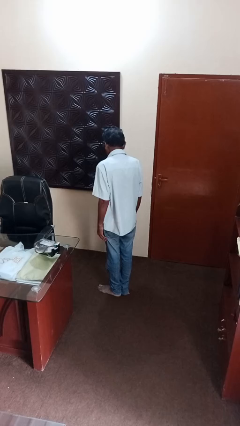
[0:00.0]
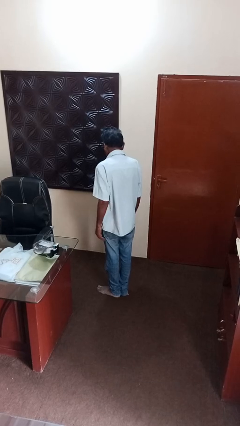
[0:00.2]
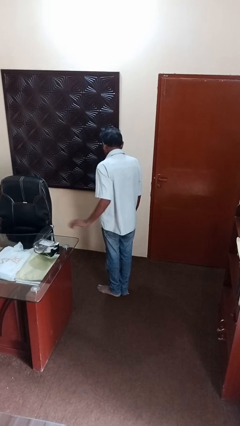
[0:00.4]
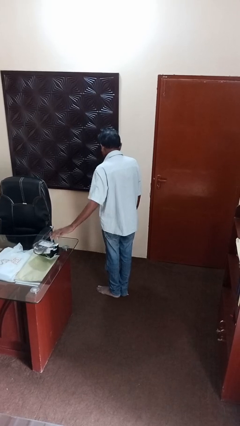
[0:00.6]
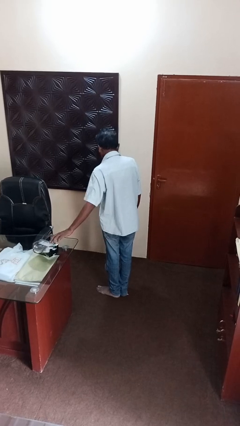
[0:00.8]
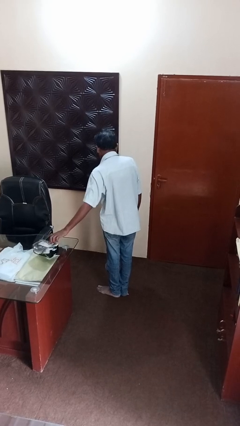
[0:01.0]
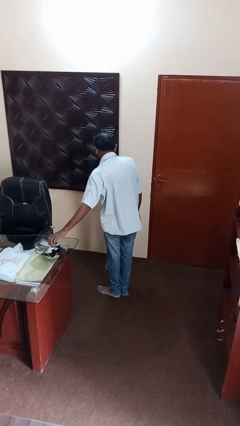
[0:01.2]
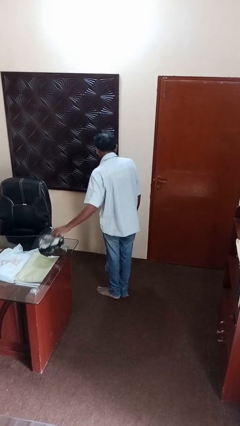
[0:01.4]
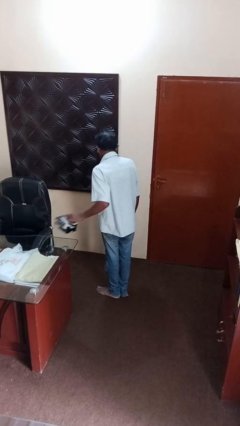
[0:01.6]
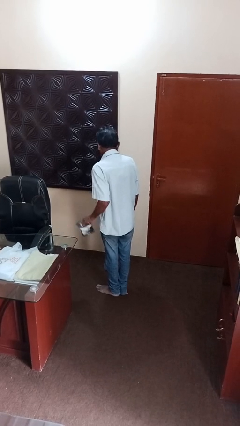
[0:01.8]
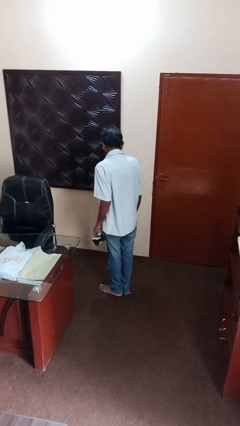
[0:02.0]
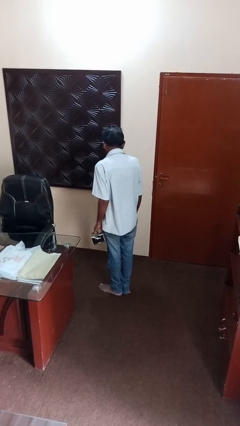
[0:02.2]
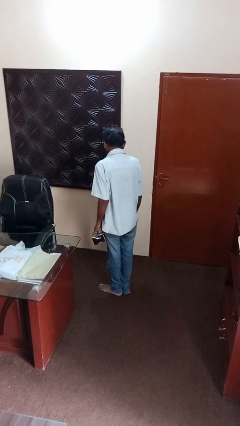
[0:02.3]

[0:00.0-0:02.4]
person picks up object from table

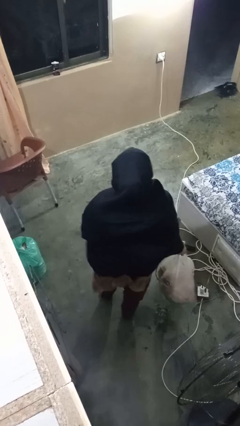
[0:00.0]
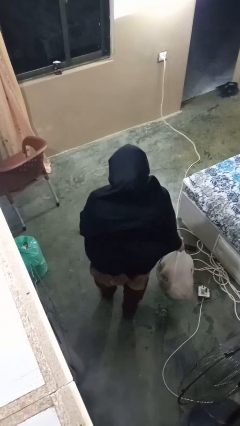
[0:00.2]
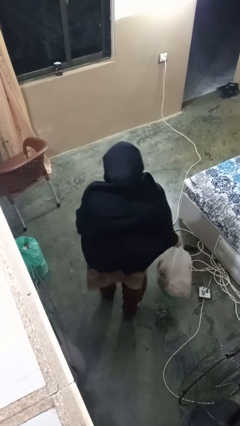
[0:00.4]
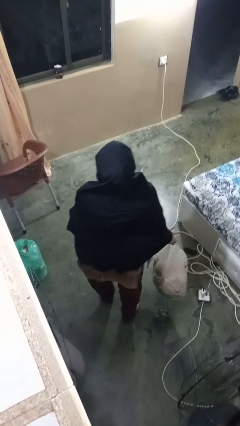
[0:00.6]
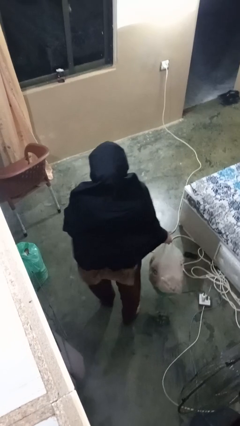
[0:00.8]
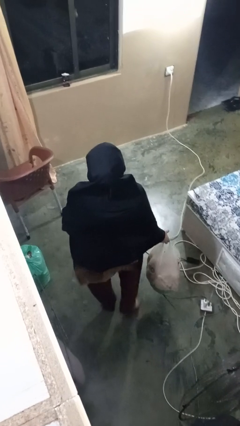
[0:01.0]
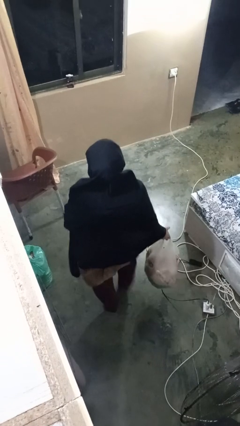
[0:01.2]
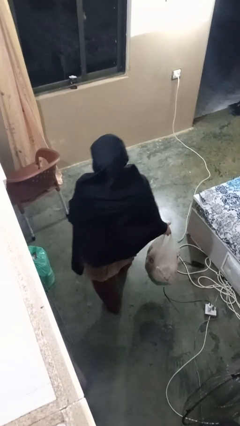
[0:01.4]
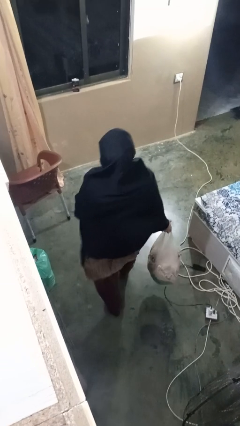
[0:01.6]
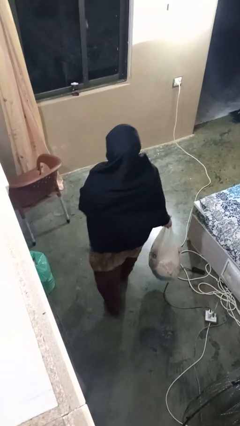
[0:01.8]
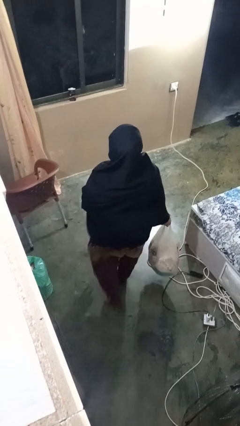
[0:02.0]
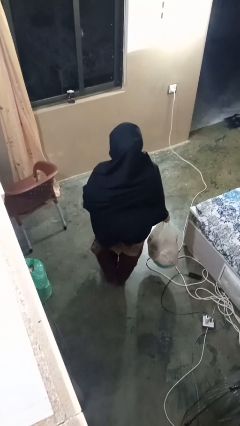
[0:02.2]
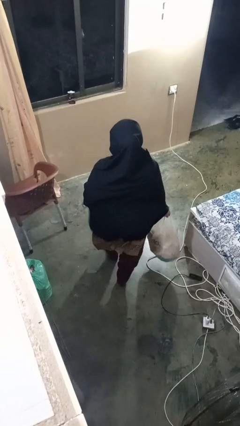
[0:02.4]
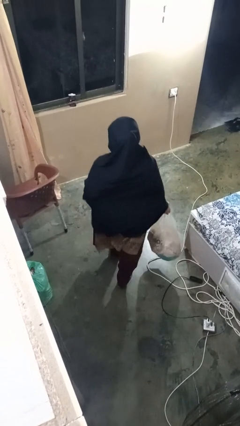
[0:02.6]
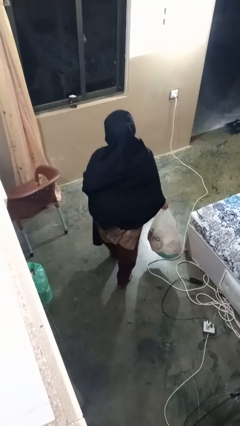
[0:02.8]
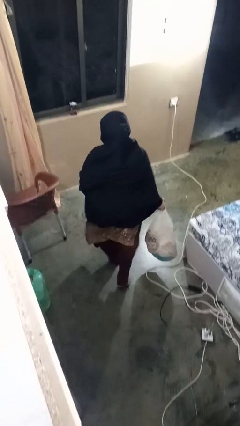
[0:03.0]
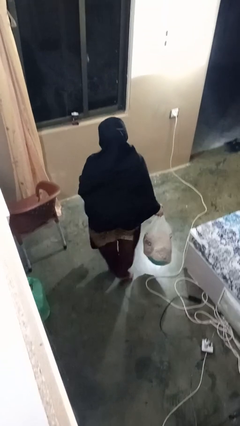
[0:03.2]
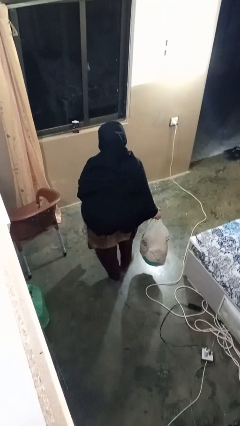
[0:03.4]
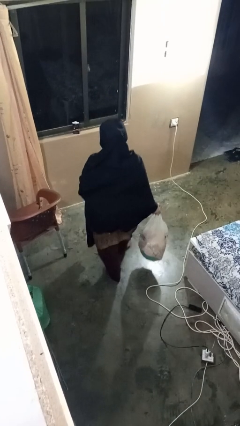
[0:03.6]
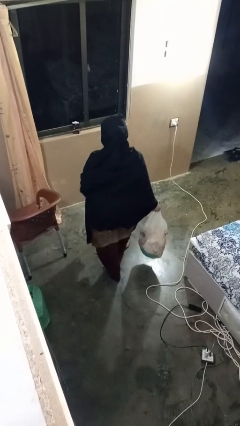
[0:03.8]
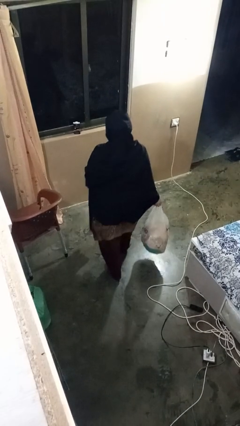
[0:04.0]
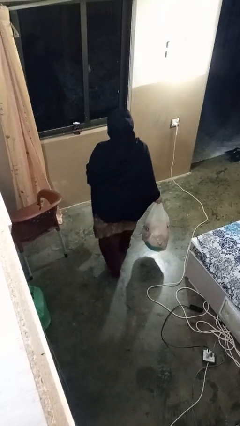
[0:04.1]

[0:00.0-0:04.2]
person carries groceries

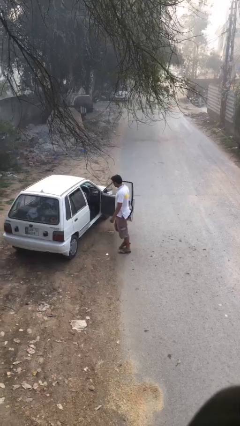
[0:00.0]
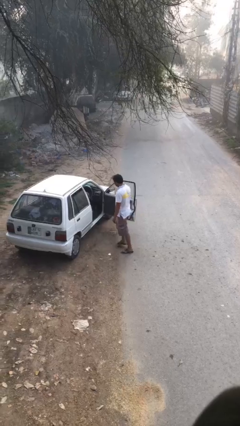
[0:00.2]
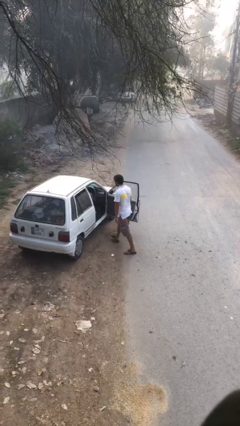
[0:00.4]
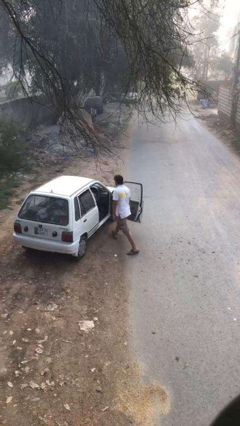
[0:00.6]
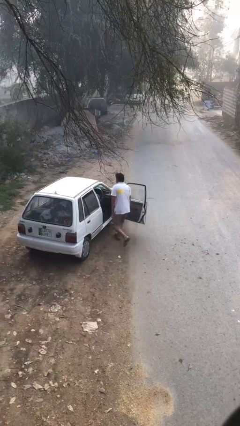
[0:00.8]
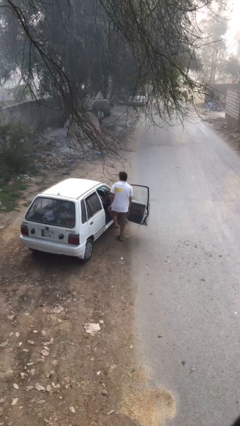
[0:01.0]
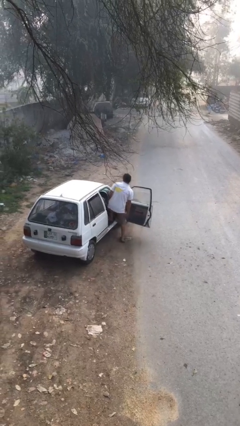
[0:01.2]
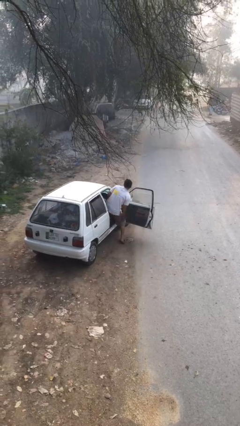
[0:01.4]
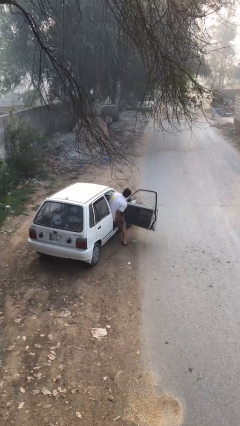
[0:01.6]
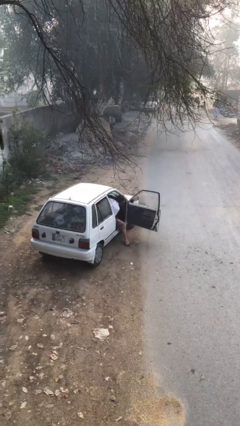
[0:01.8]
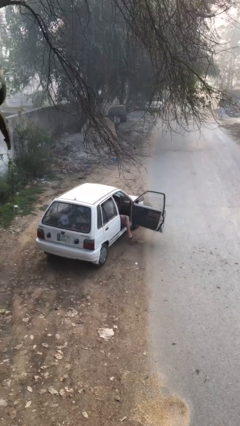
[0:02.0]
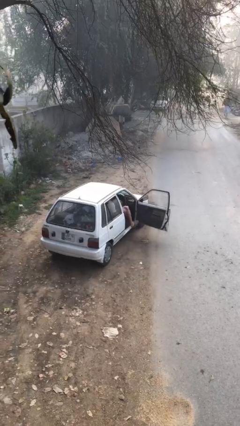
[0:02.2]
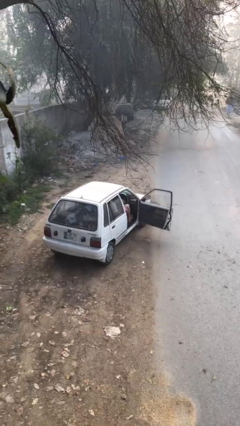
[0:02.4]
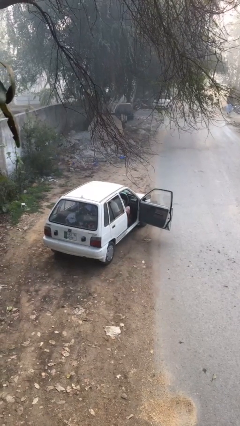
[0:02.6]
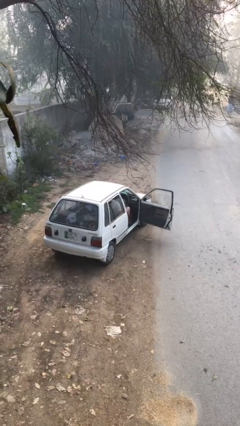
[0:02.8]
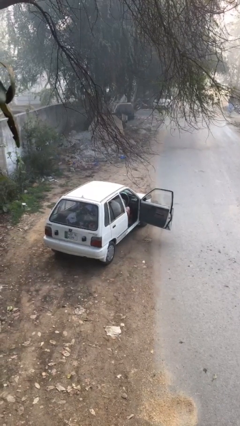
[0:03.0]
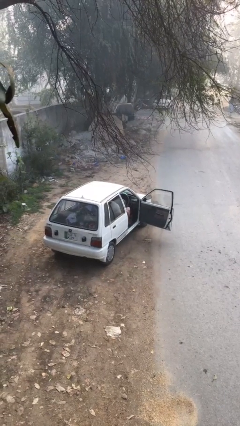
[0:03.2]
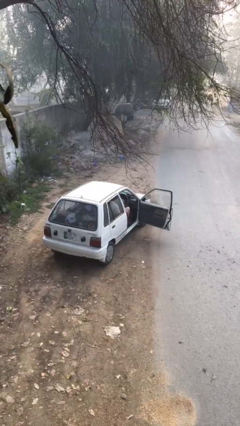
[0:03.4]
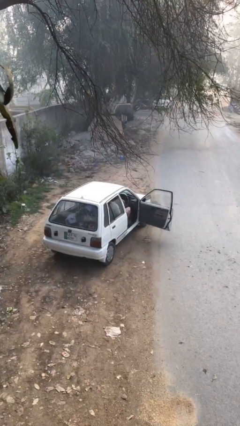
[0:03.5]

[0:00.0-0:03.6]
person enters car

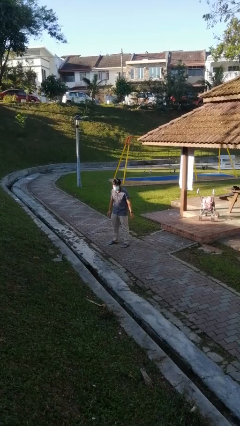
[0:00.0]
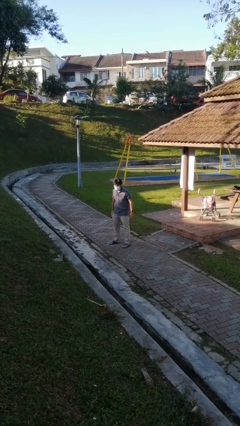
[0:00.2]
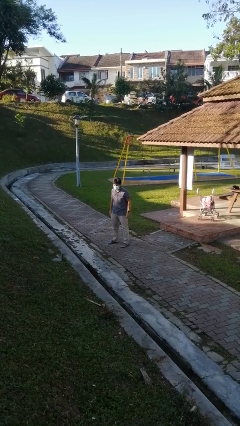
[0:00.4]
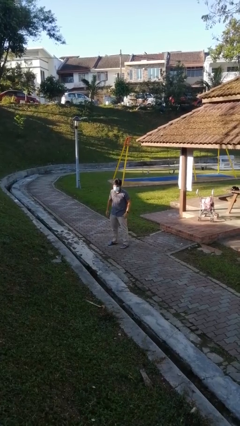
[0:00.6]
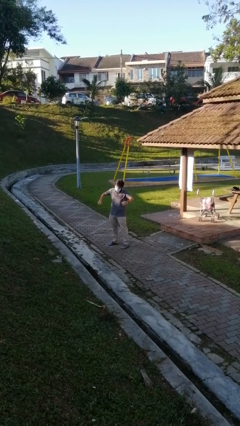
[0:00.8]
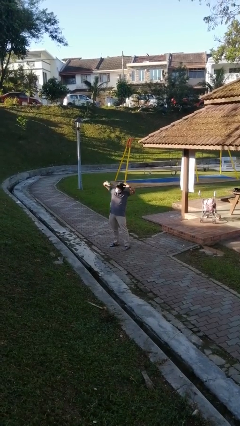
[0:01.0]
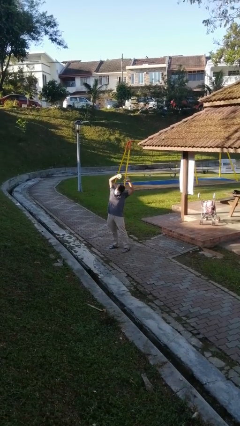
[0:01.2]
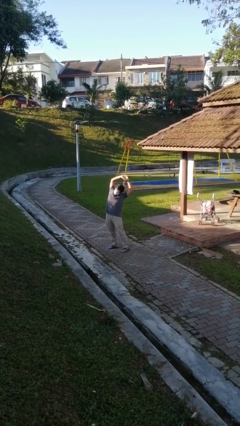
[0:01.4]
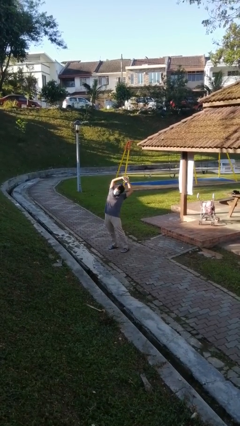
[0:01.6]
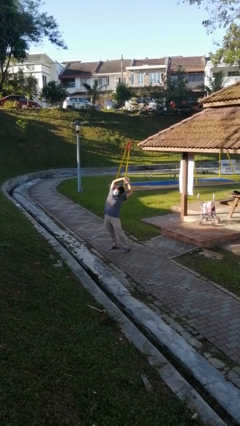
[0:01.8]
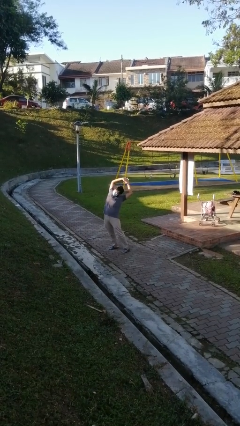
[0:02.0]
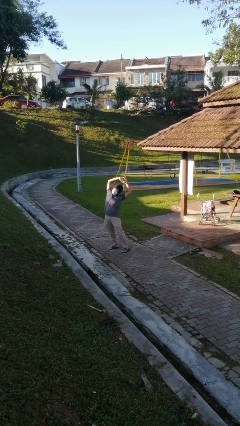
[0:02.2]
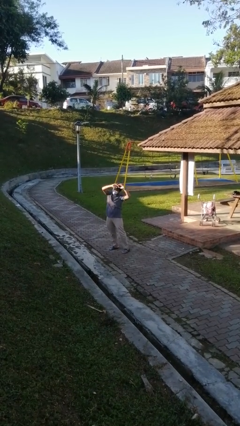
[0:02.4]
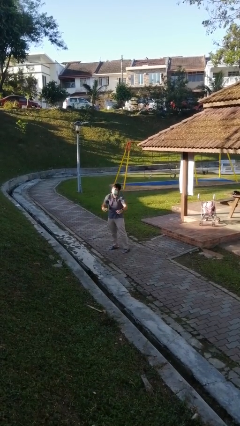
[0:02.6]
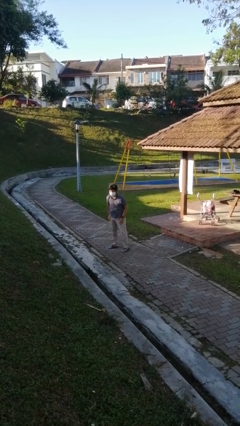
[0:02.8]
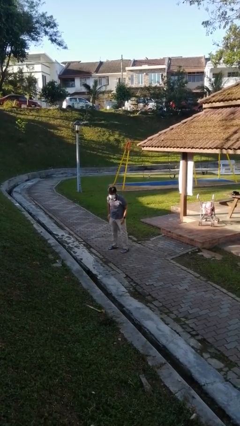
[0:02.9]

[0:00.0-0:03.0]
person stretches arms over head

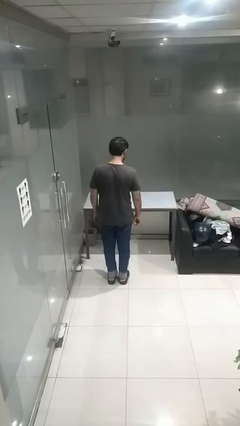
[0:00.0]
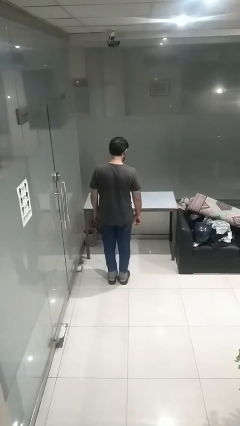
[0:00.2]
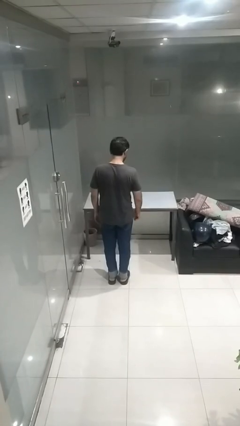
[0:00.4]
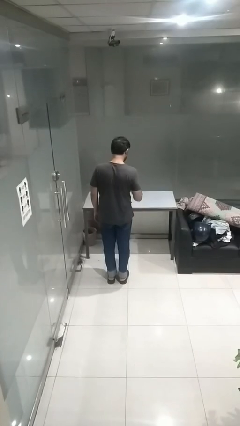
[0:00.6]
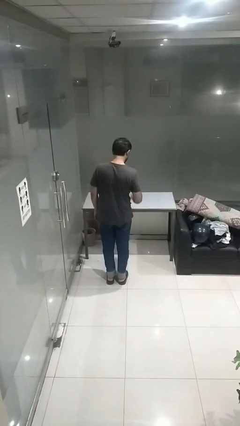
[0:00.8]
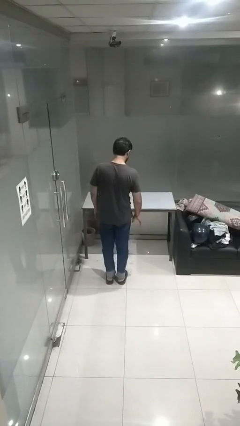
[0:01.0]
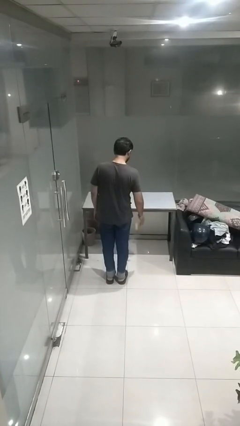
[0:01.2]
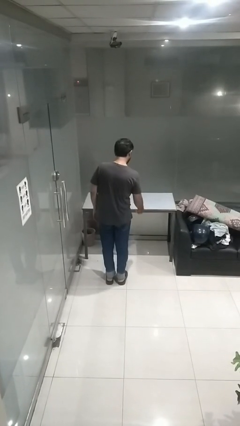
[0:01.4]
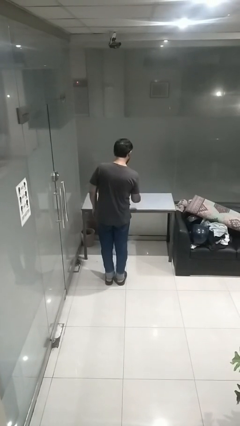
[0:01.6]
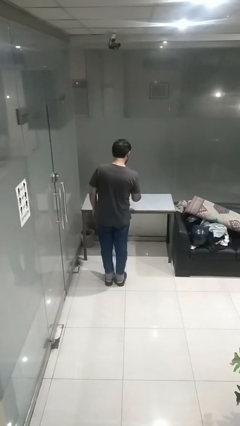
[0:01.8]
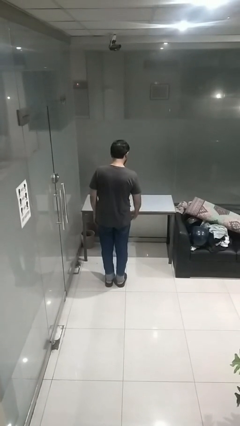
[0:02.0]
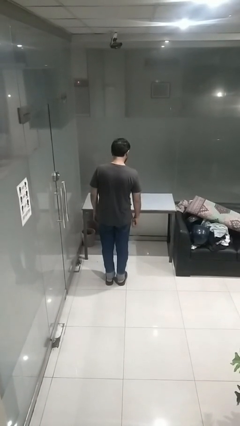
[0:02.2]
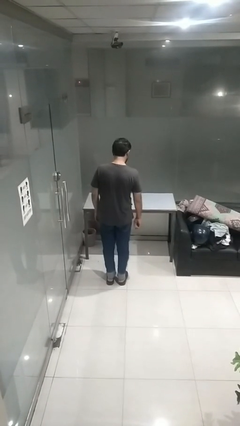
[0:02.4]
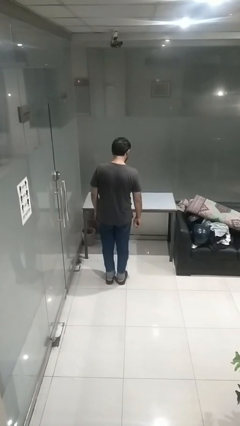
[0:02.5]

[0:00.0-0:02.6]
person bounces ball on floor

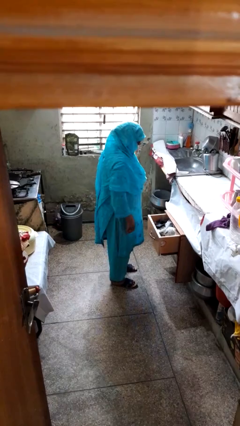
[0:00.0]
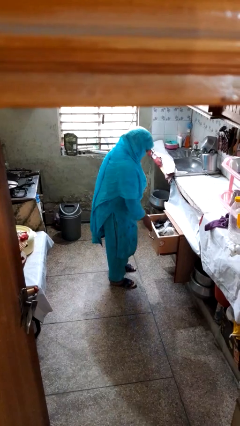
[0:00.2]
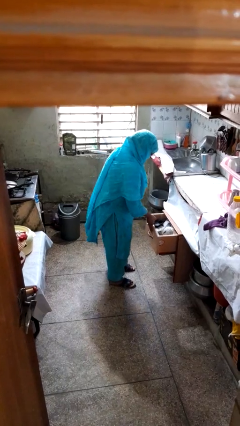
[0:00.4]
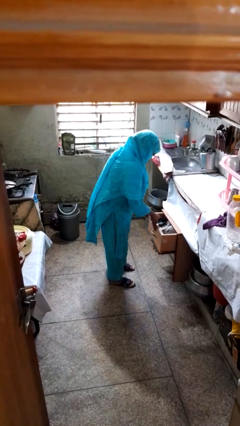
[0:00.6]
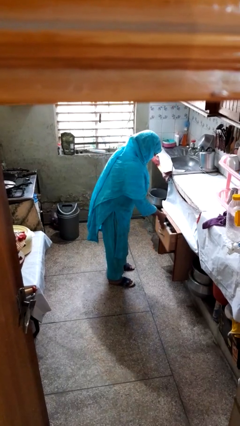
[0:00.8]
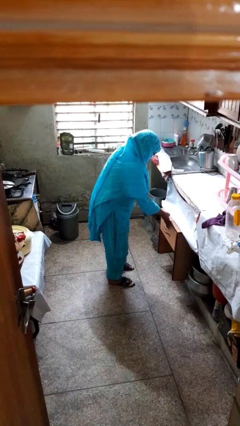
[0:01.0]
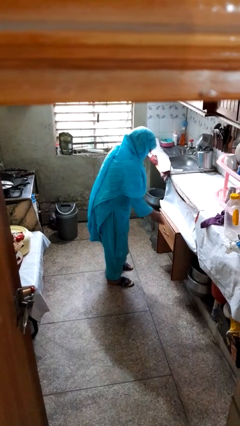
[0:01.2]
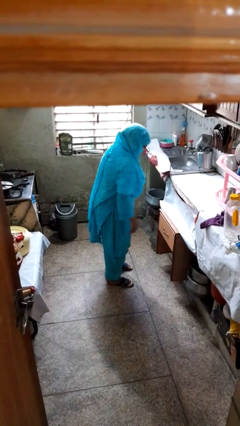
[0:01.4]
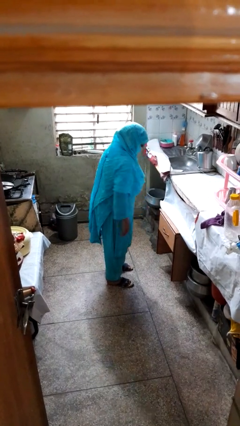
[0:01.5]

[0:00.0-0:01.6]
person closes kitchen drawer
